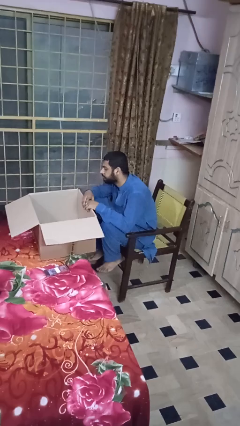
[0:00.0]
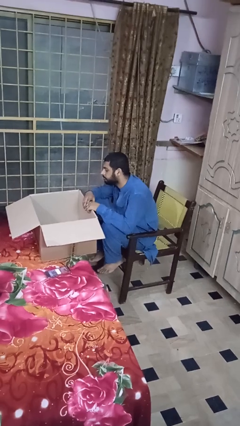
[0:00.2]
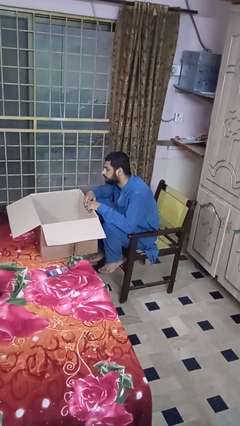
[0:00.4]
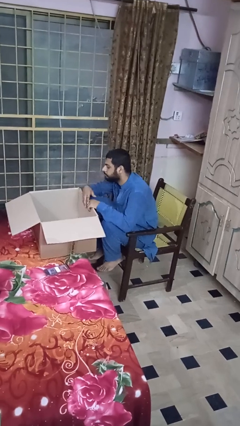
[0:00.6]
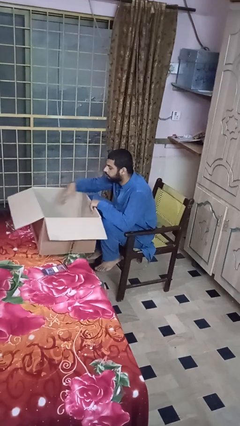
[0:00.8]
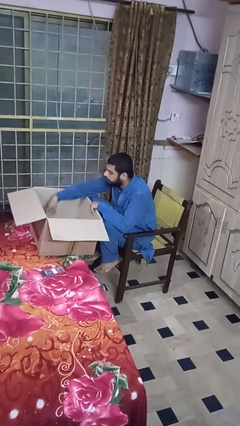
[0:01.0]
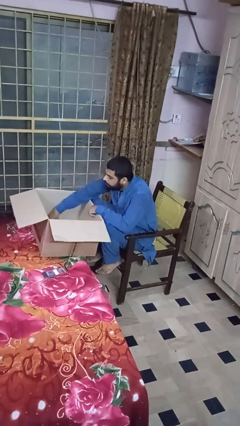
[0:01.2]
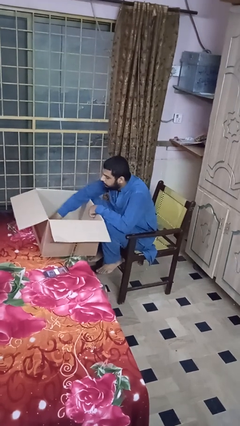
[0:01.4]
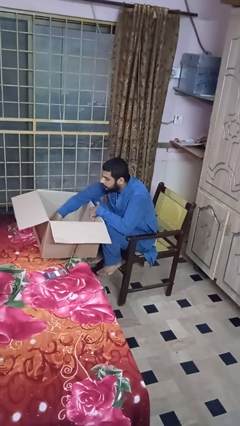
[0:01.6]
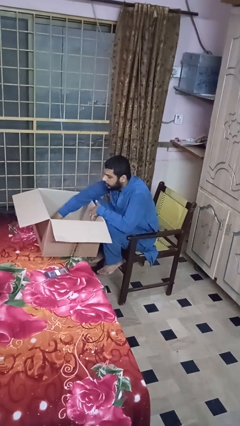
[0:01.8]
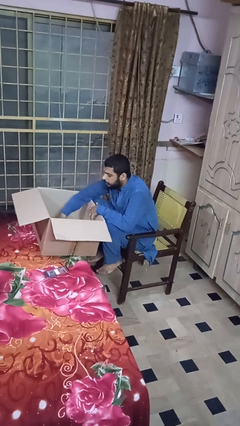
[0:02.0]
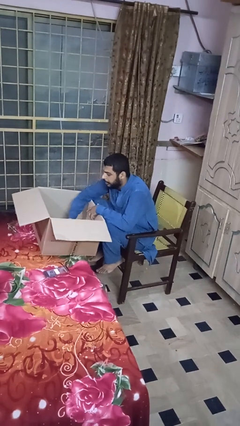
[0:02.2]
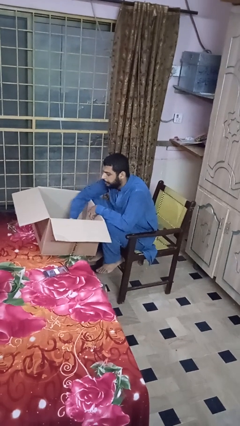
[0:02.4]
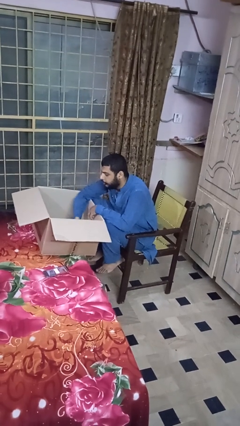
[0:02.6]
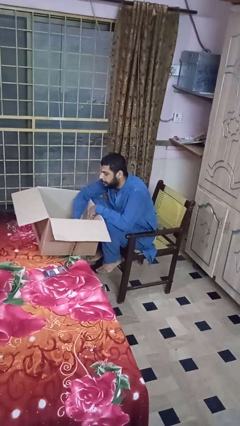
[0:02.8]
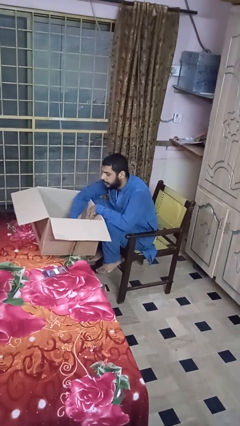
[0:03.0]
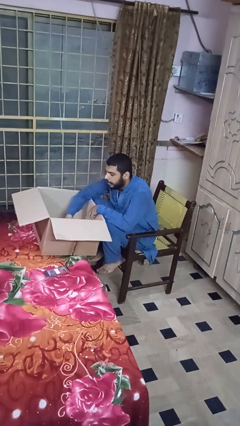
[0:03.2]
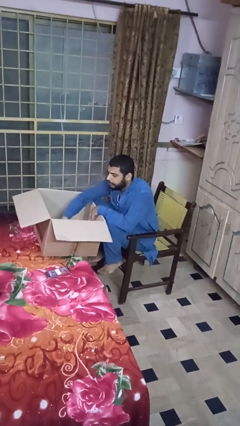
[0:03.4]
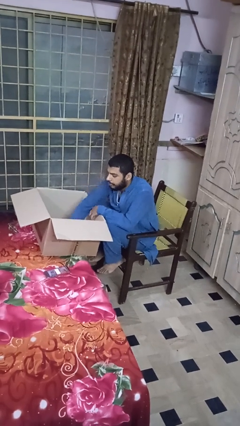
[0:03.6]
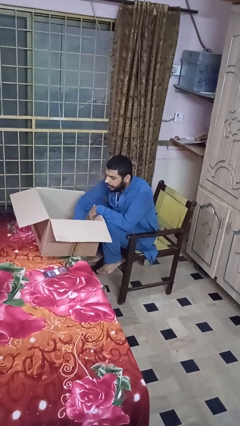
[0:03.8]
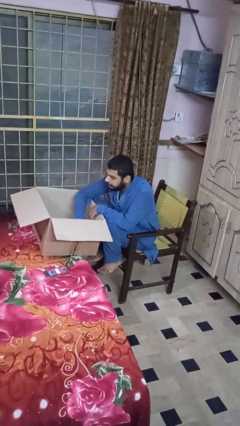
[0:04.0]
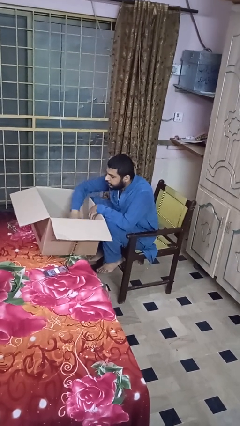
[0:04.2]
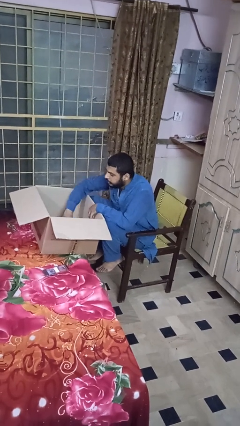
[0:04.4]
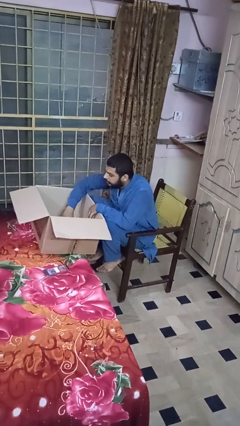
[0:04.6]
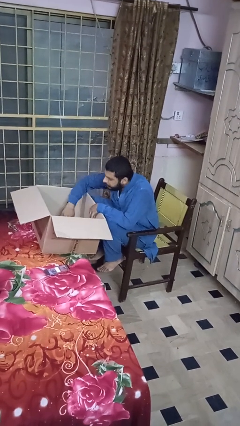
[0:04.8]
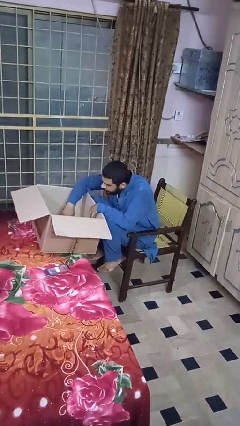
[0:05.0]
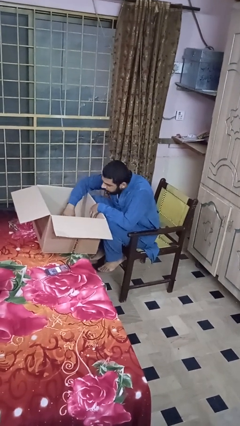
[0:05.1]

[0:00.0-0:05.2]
person searches in box

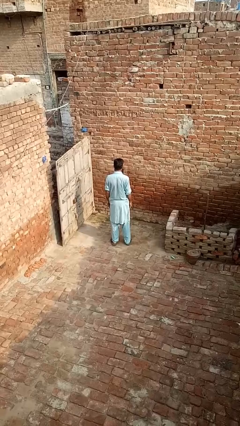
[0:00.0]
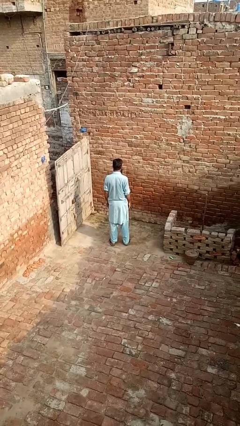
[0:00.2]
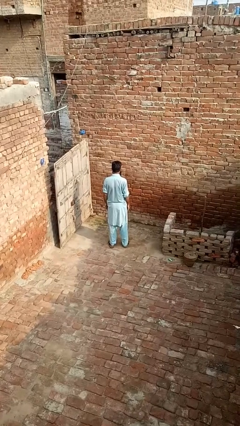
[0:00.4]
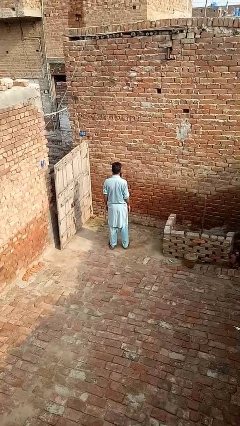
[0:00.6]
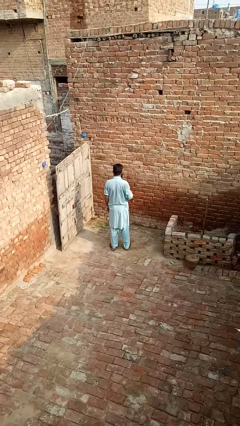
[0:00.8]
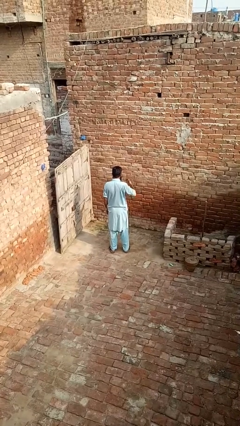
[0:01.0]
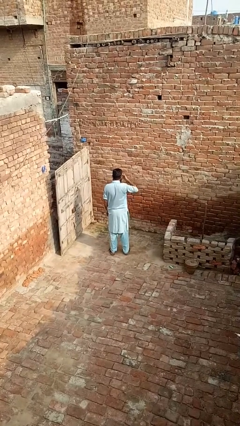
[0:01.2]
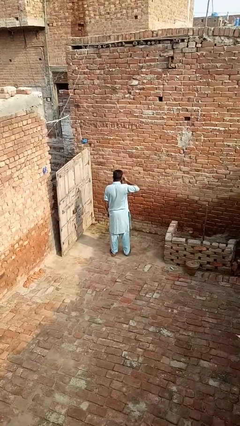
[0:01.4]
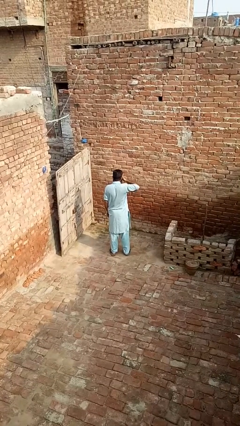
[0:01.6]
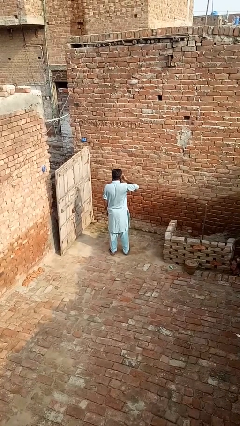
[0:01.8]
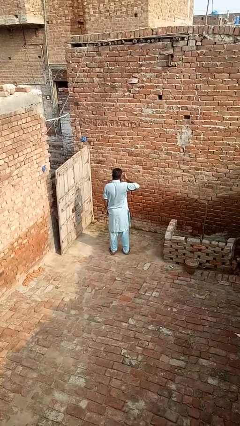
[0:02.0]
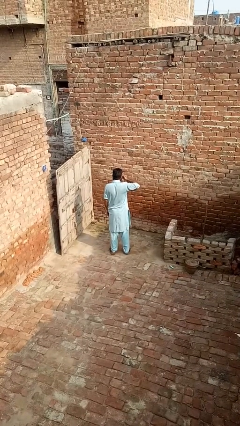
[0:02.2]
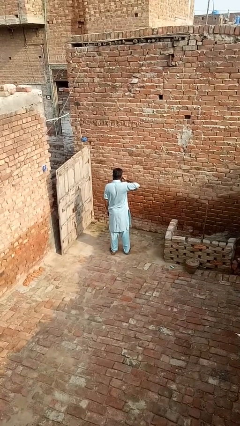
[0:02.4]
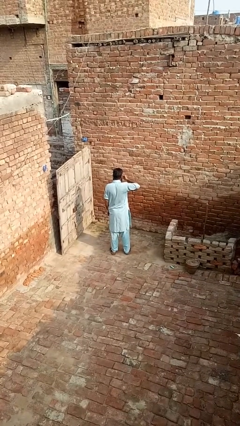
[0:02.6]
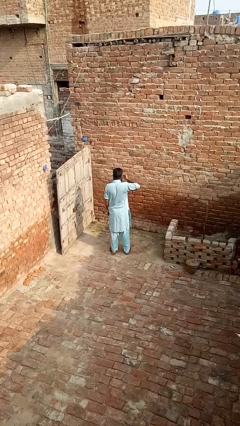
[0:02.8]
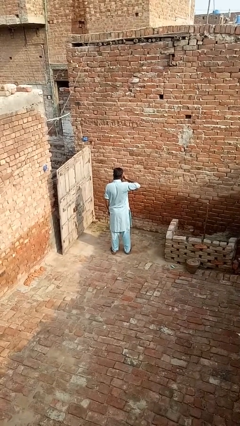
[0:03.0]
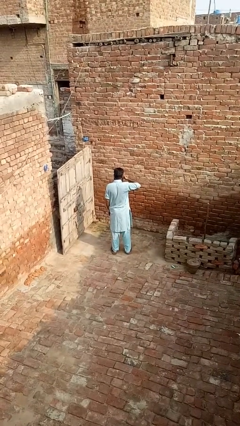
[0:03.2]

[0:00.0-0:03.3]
person rubs eyes

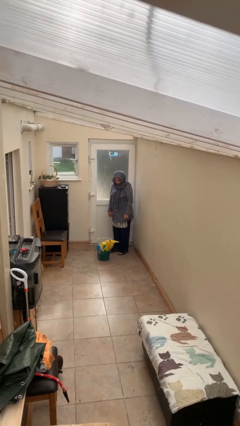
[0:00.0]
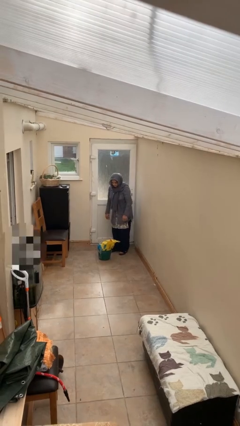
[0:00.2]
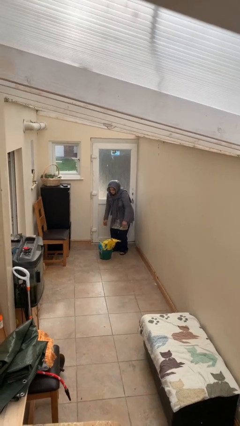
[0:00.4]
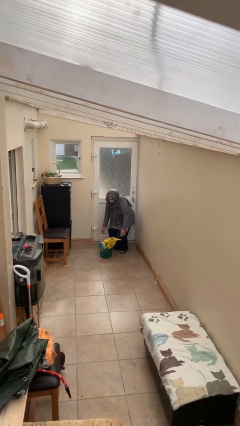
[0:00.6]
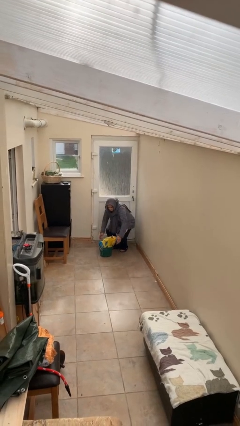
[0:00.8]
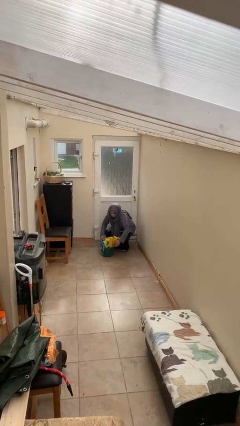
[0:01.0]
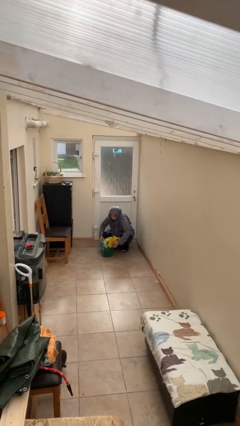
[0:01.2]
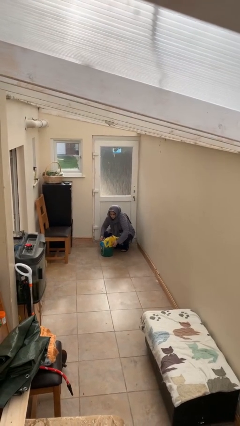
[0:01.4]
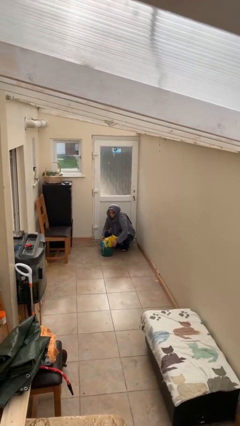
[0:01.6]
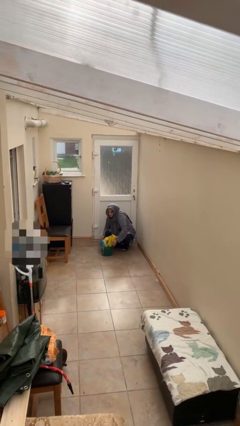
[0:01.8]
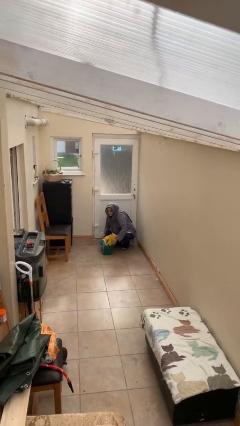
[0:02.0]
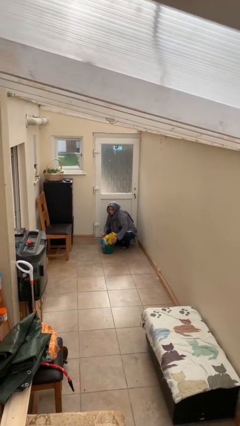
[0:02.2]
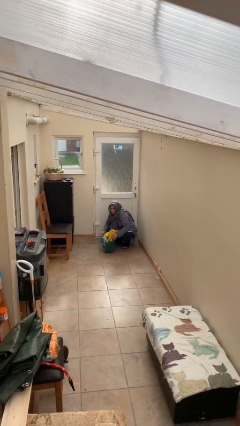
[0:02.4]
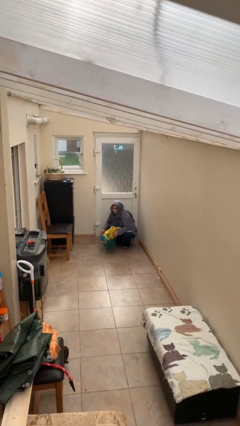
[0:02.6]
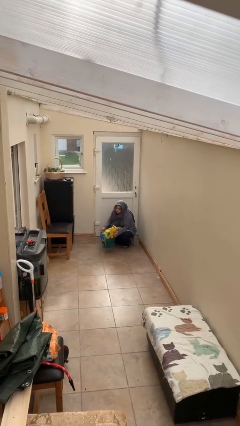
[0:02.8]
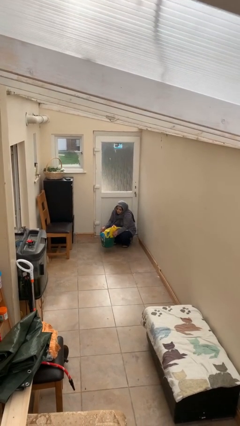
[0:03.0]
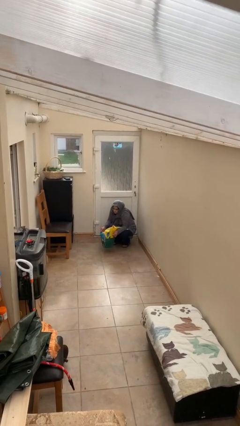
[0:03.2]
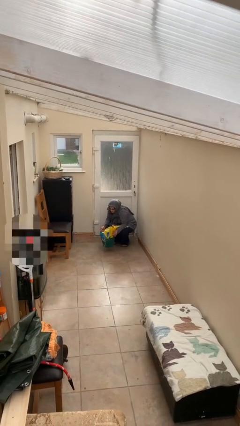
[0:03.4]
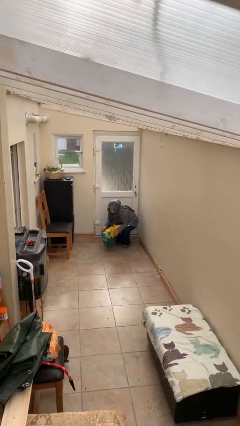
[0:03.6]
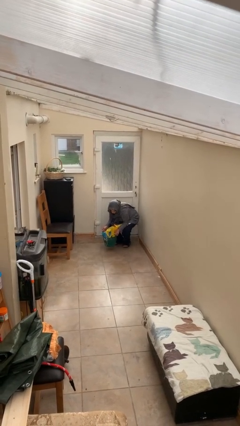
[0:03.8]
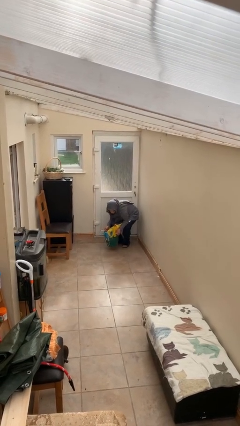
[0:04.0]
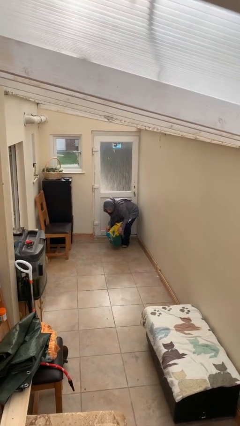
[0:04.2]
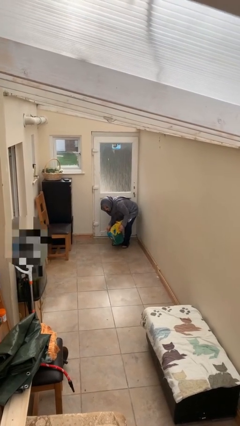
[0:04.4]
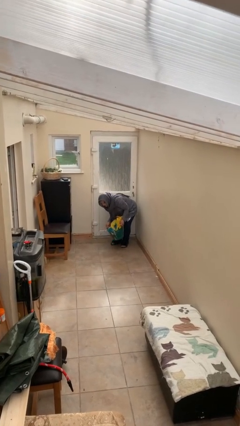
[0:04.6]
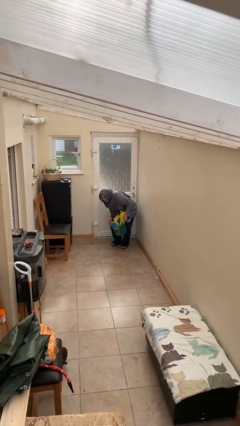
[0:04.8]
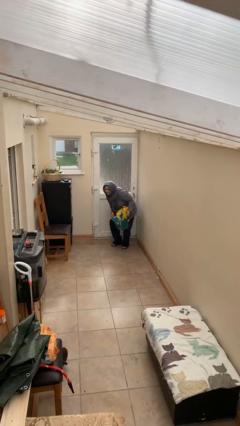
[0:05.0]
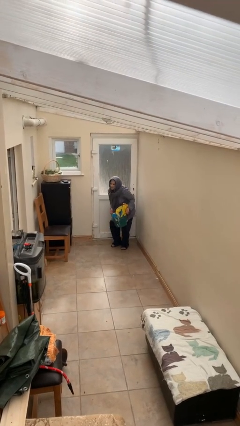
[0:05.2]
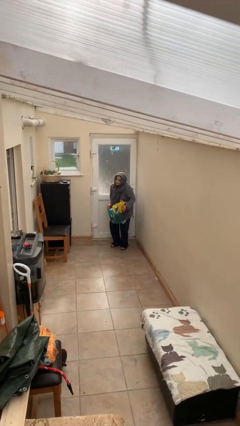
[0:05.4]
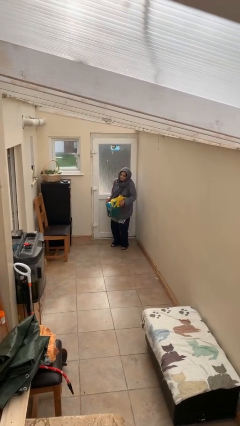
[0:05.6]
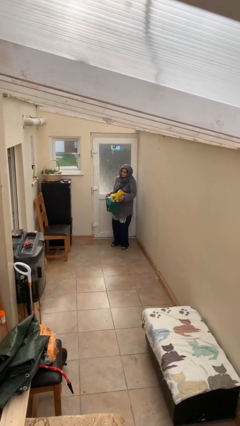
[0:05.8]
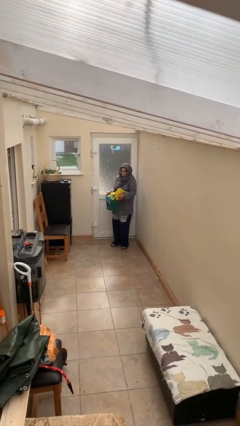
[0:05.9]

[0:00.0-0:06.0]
person picks up object from floor

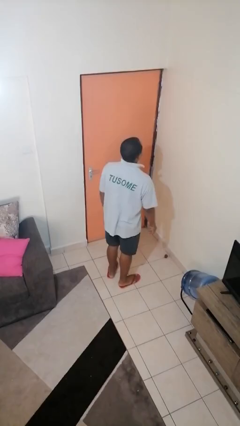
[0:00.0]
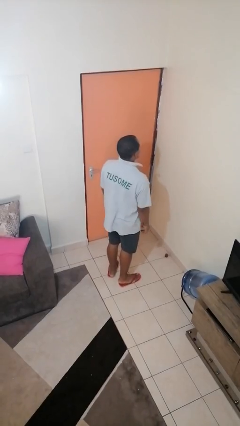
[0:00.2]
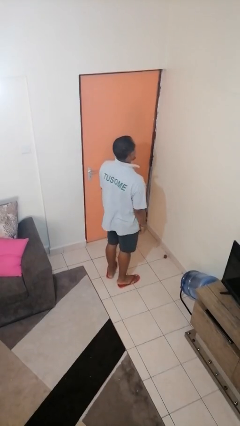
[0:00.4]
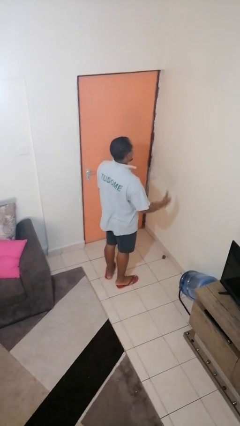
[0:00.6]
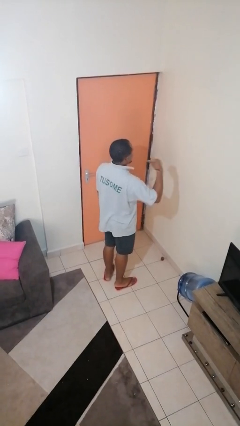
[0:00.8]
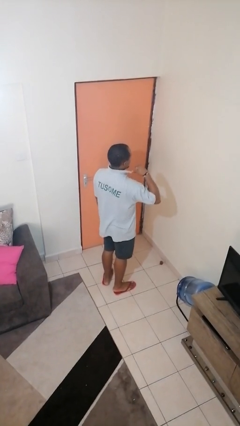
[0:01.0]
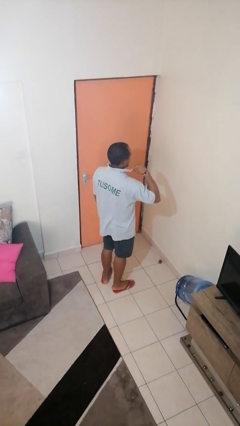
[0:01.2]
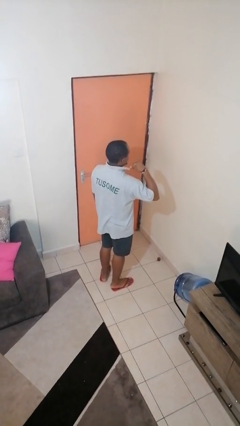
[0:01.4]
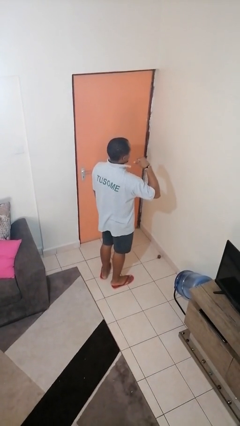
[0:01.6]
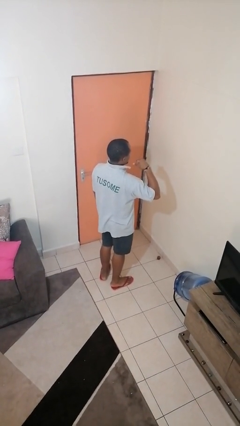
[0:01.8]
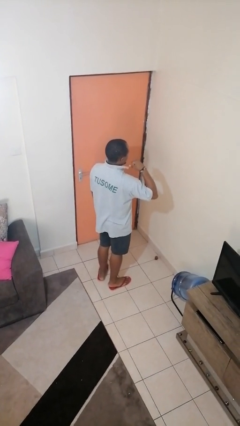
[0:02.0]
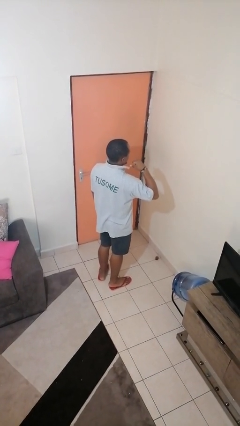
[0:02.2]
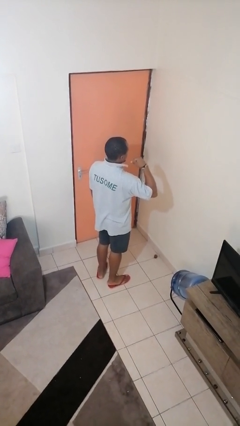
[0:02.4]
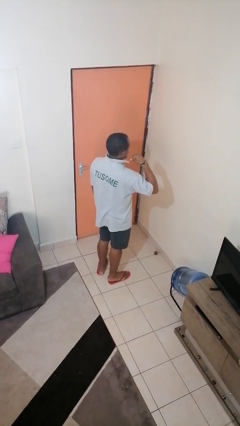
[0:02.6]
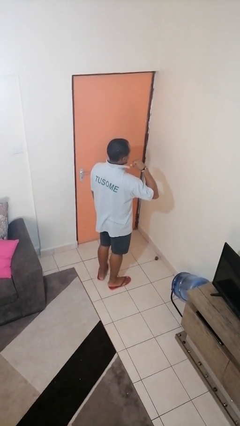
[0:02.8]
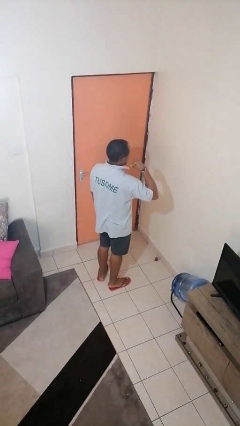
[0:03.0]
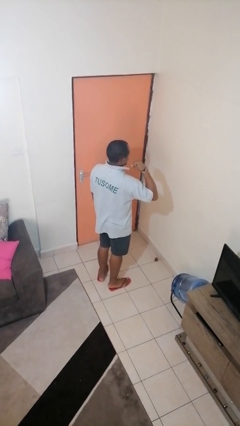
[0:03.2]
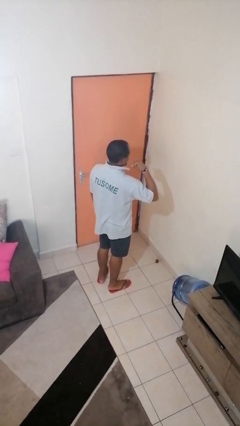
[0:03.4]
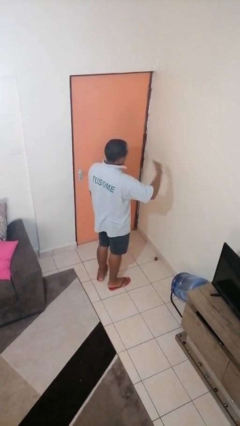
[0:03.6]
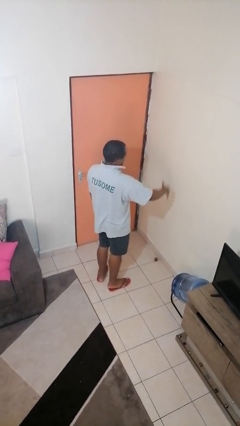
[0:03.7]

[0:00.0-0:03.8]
person gestures call me
